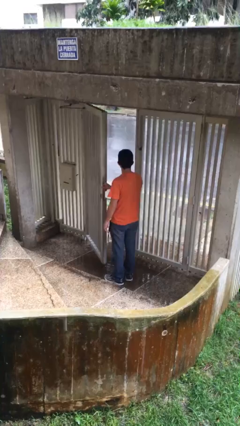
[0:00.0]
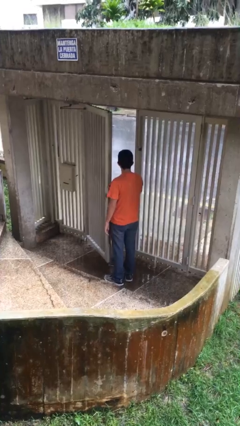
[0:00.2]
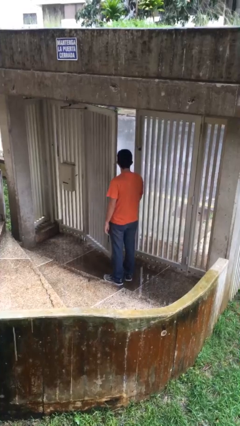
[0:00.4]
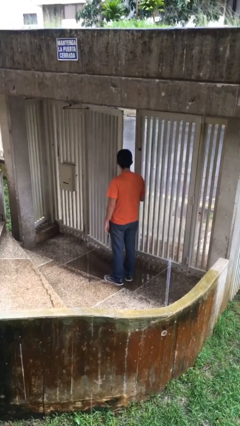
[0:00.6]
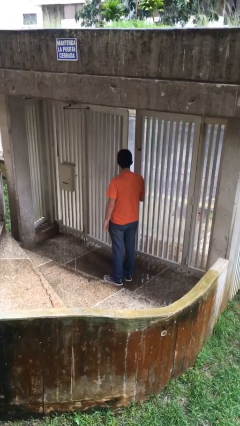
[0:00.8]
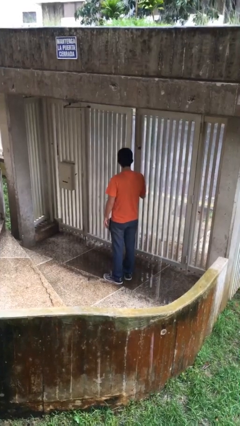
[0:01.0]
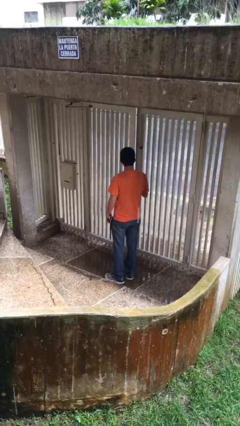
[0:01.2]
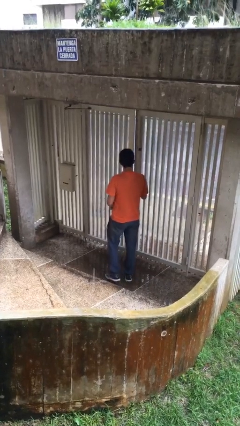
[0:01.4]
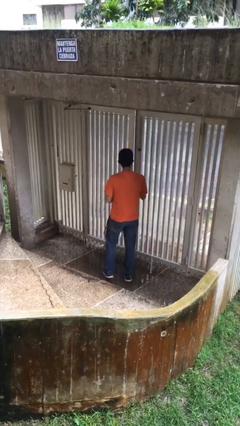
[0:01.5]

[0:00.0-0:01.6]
person closes facility door

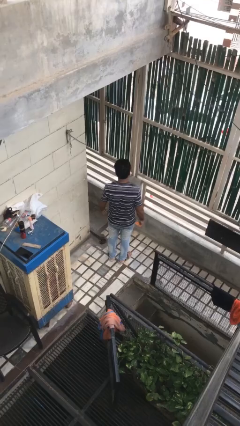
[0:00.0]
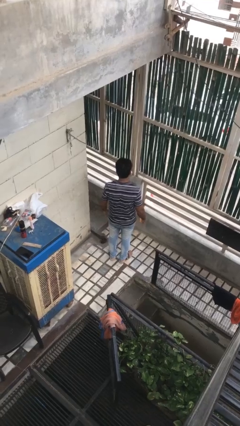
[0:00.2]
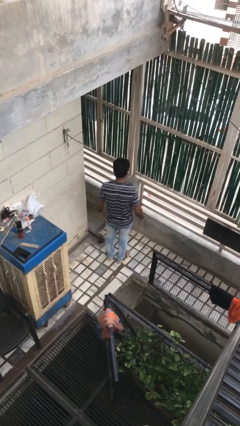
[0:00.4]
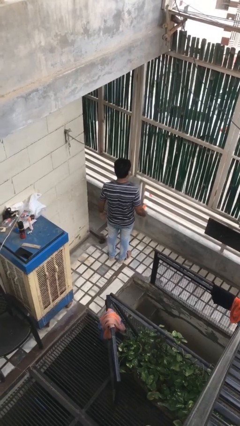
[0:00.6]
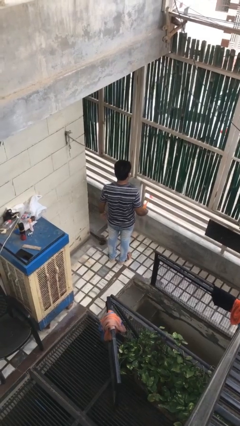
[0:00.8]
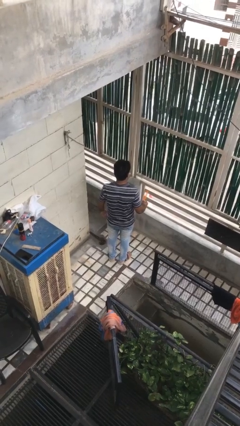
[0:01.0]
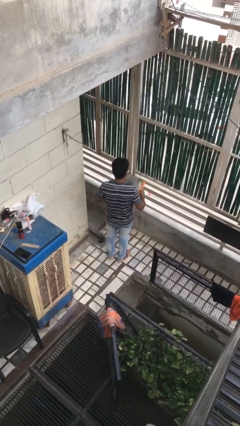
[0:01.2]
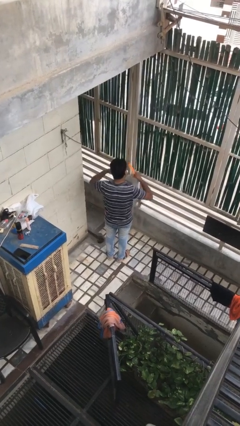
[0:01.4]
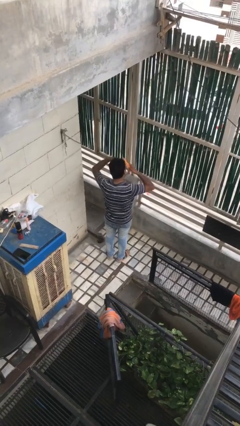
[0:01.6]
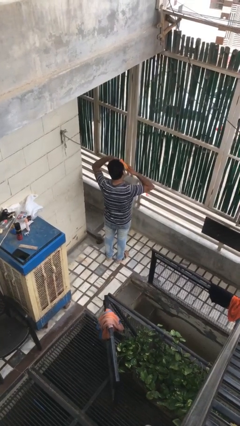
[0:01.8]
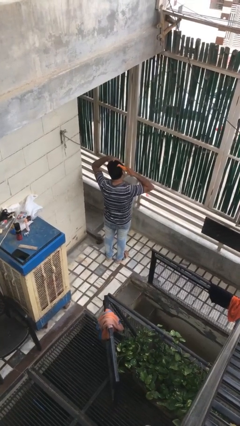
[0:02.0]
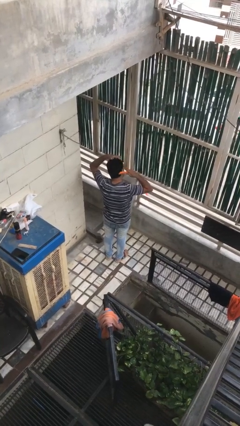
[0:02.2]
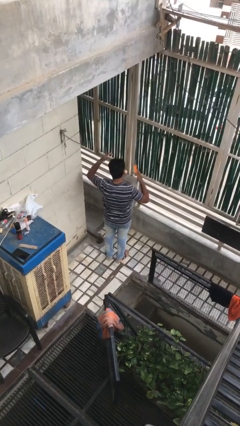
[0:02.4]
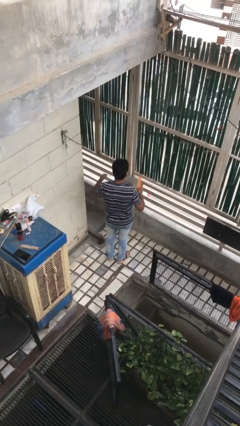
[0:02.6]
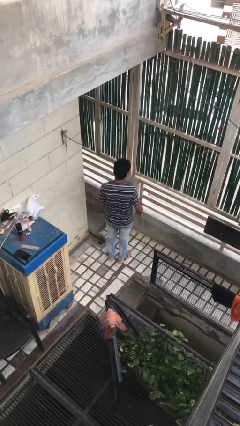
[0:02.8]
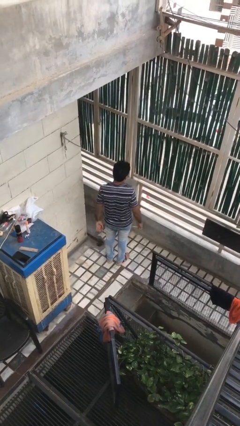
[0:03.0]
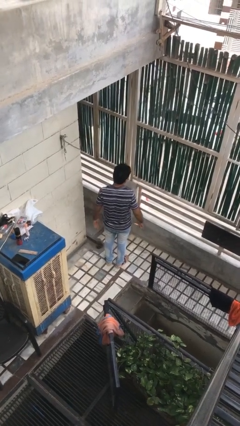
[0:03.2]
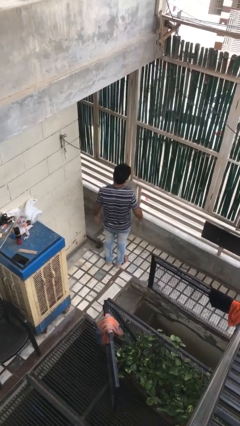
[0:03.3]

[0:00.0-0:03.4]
person brushes hair

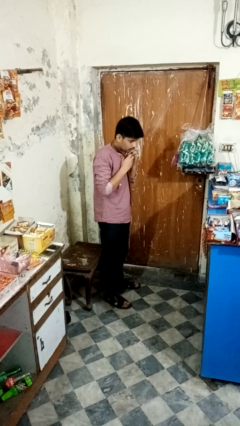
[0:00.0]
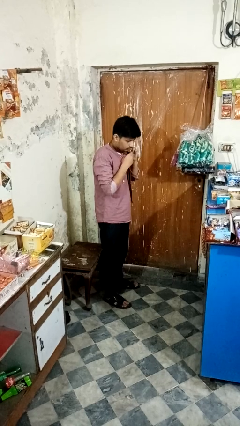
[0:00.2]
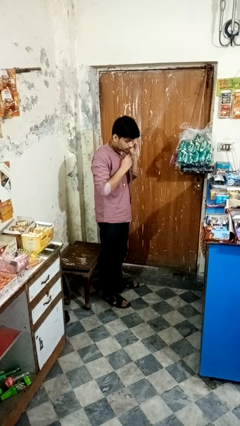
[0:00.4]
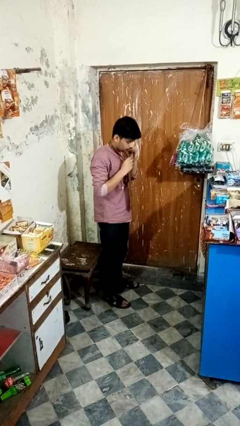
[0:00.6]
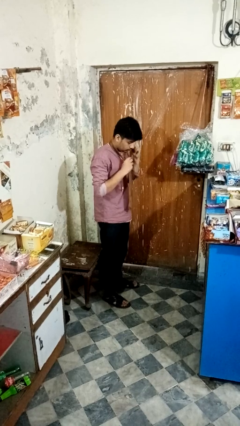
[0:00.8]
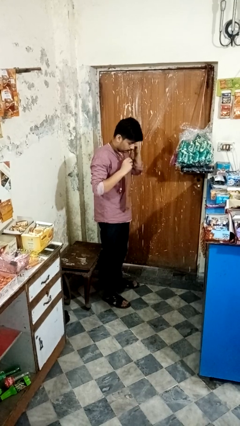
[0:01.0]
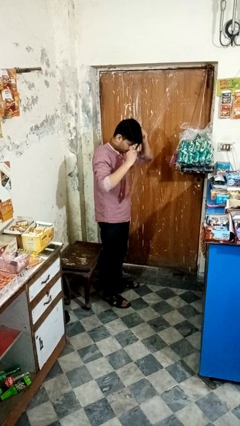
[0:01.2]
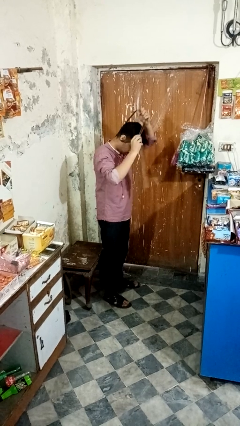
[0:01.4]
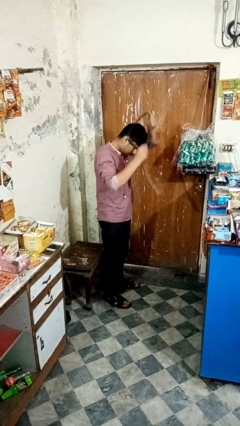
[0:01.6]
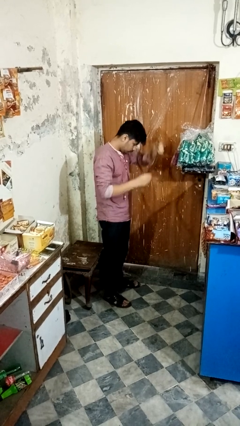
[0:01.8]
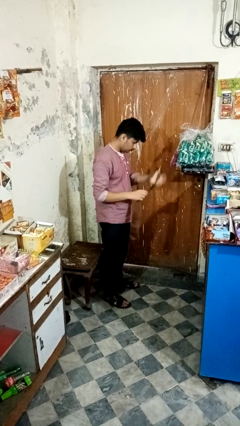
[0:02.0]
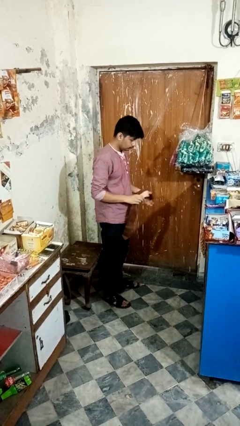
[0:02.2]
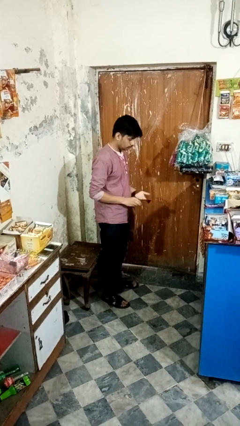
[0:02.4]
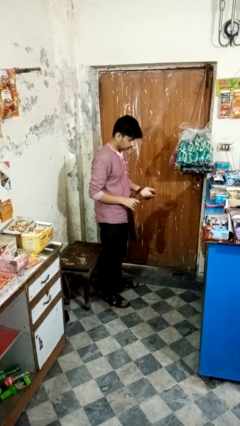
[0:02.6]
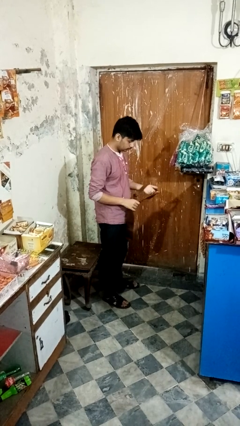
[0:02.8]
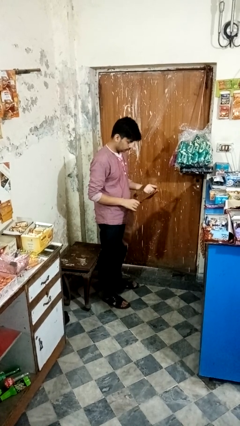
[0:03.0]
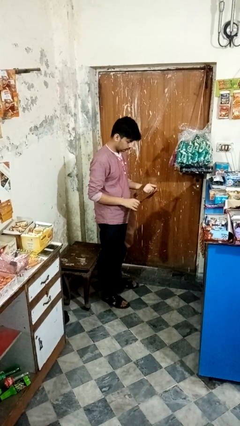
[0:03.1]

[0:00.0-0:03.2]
person takes off necktie

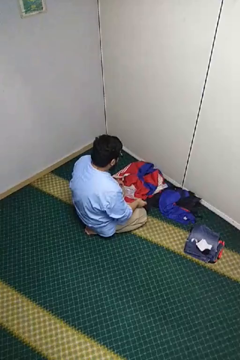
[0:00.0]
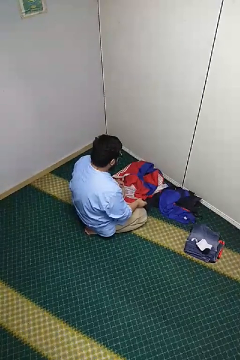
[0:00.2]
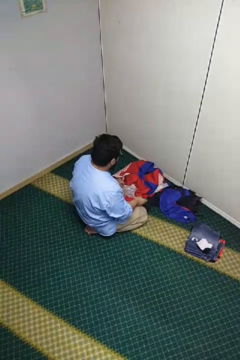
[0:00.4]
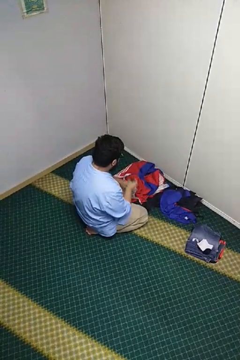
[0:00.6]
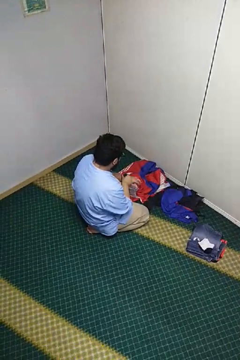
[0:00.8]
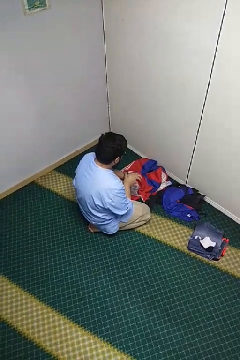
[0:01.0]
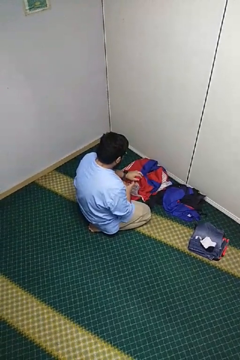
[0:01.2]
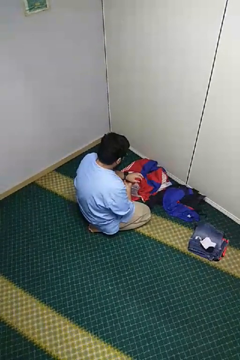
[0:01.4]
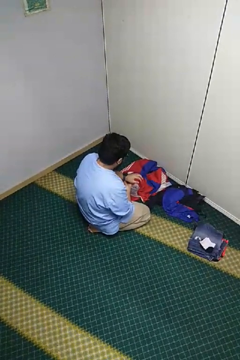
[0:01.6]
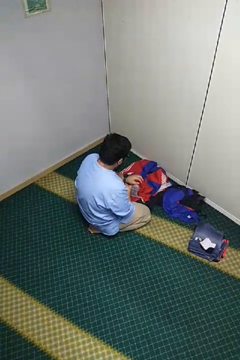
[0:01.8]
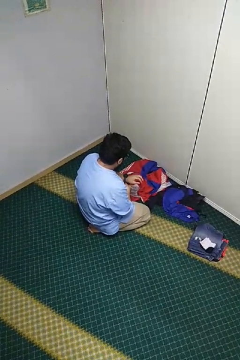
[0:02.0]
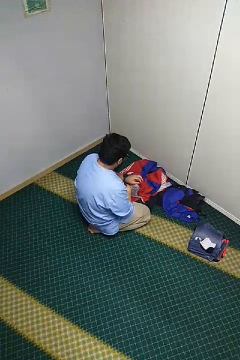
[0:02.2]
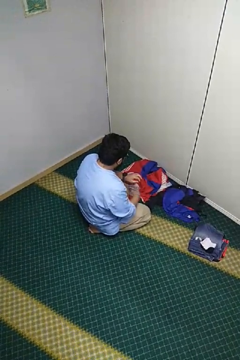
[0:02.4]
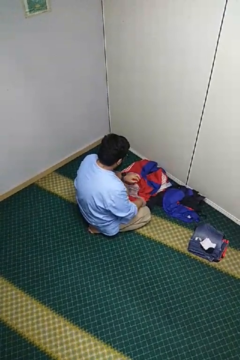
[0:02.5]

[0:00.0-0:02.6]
person puts on wristwatch

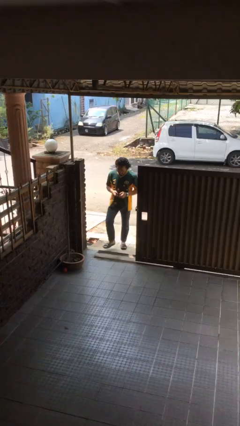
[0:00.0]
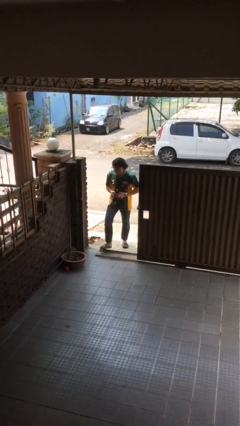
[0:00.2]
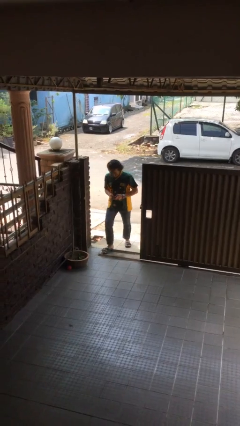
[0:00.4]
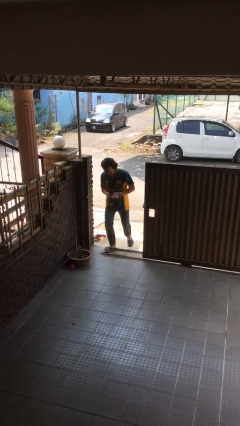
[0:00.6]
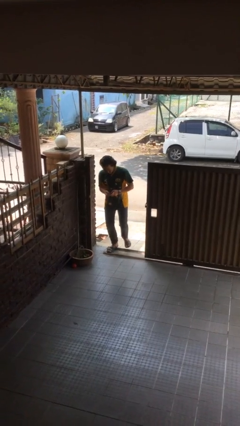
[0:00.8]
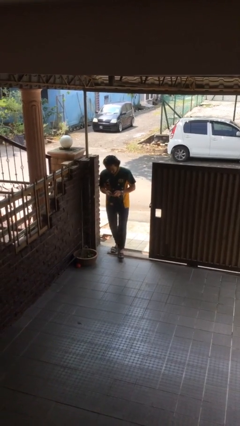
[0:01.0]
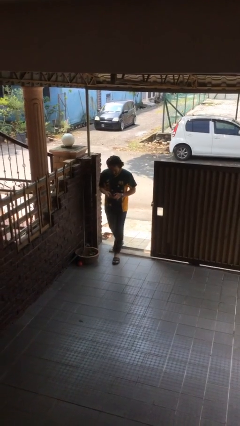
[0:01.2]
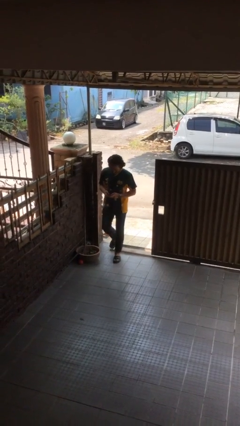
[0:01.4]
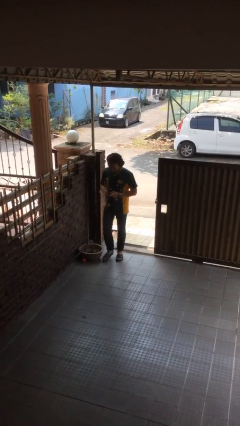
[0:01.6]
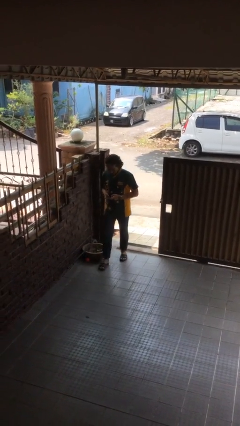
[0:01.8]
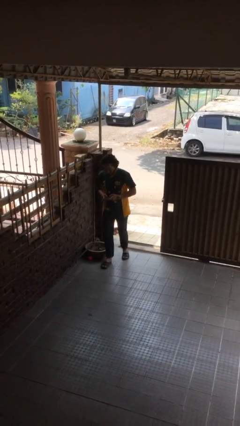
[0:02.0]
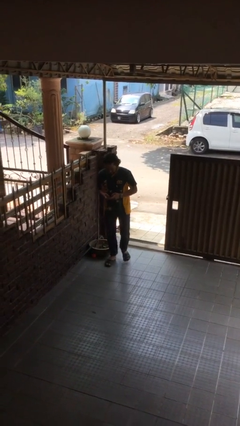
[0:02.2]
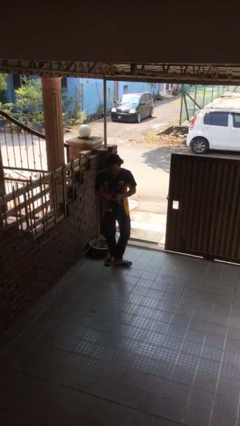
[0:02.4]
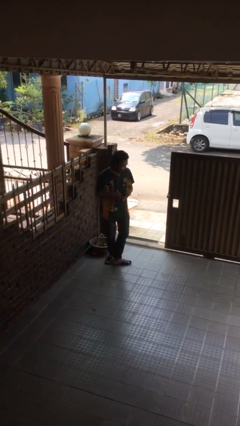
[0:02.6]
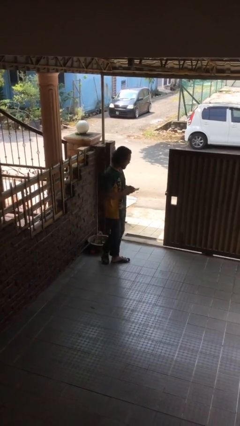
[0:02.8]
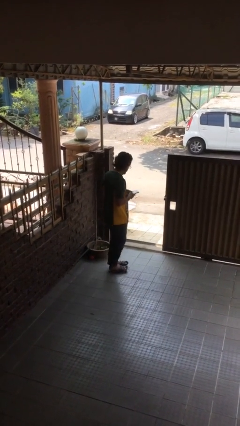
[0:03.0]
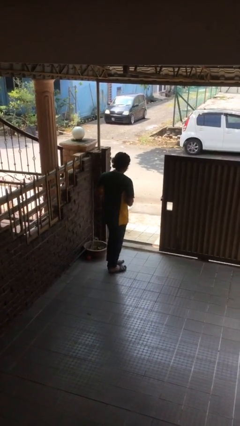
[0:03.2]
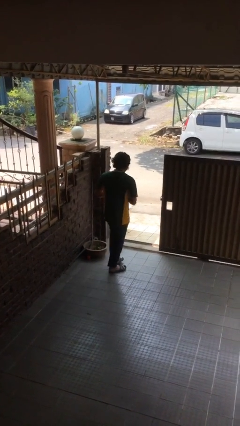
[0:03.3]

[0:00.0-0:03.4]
person enters scene through structure

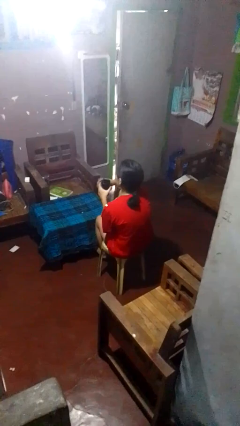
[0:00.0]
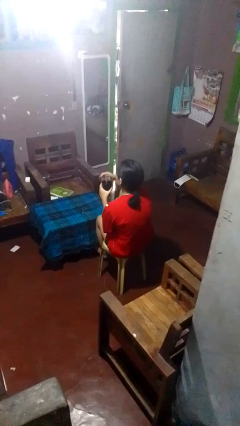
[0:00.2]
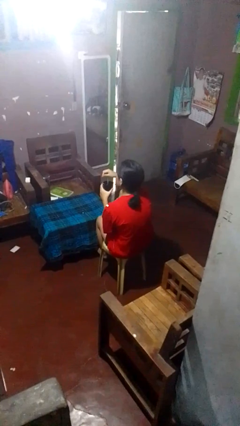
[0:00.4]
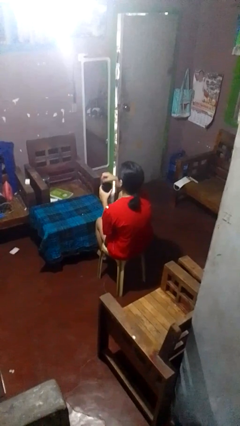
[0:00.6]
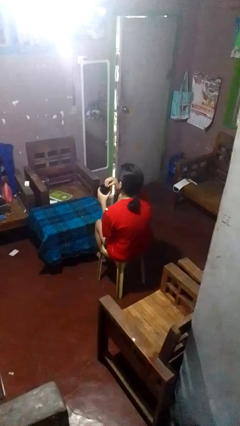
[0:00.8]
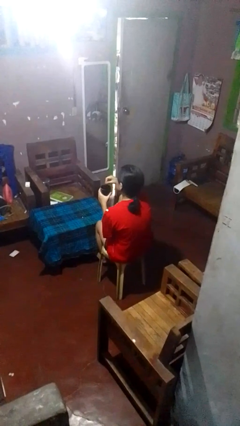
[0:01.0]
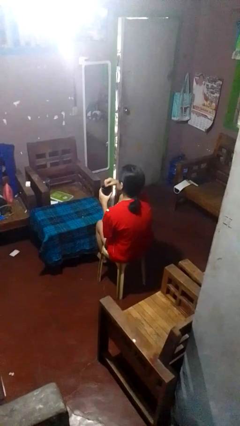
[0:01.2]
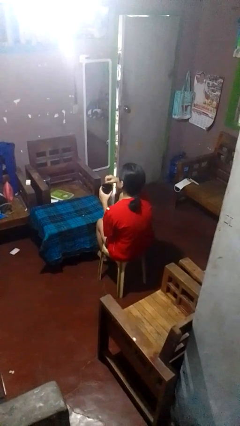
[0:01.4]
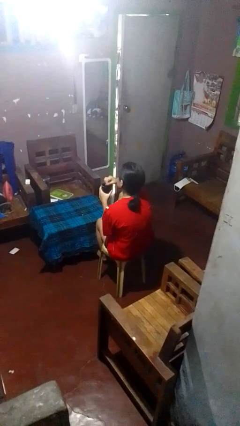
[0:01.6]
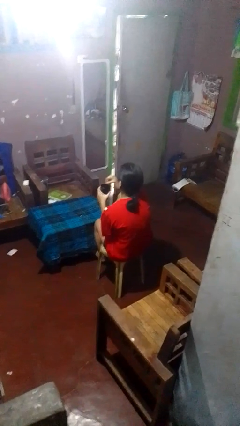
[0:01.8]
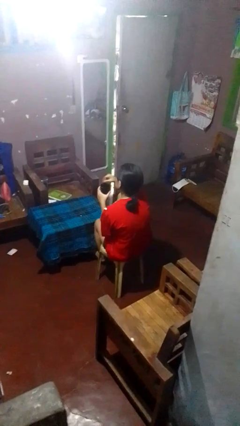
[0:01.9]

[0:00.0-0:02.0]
person stirs mug

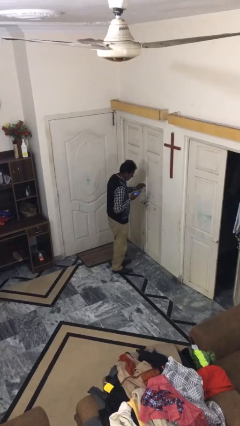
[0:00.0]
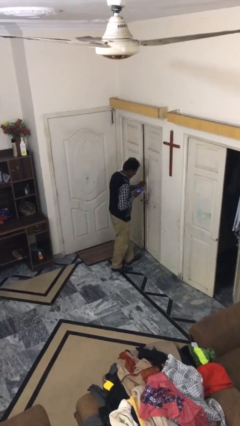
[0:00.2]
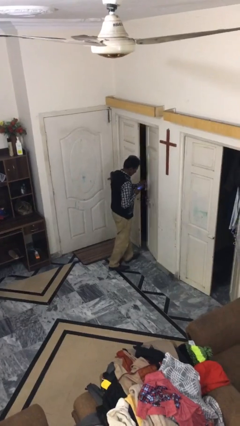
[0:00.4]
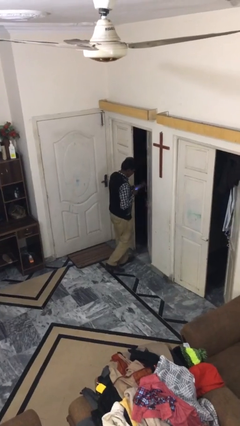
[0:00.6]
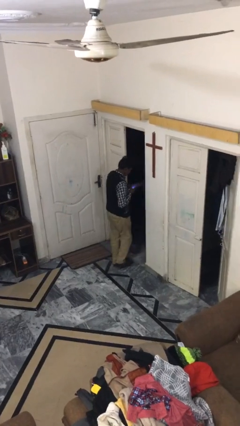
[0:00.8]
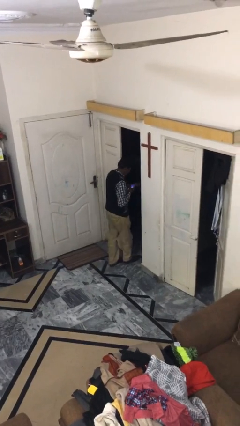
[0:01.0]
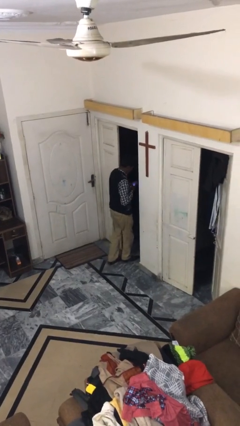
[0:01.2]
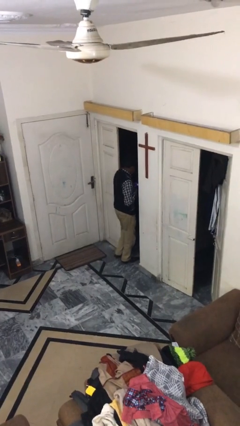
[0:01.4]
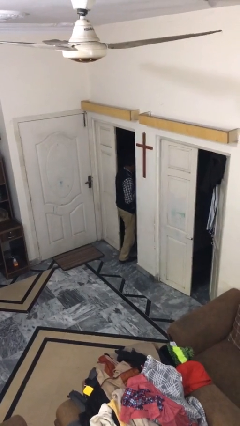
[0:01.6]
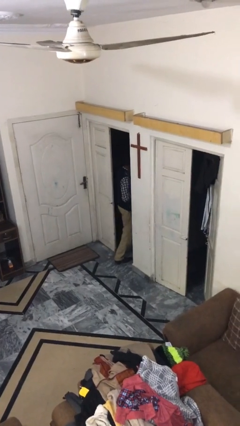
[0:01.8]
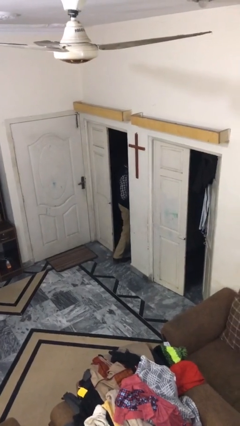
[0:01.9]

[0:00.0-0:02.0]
person exits scene through structure
